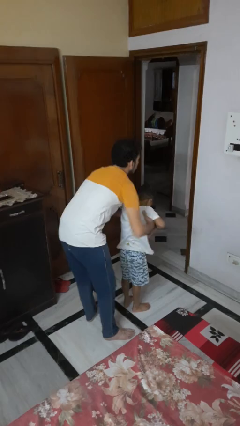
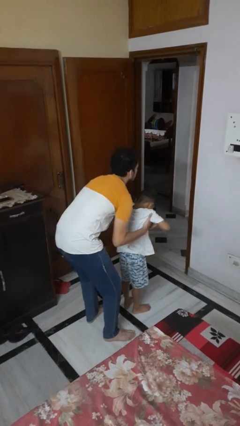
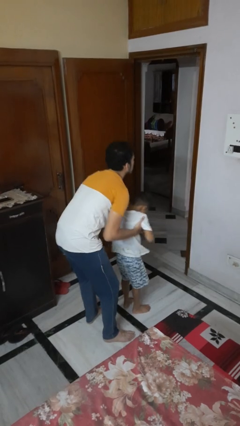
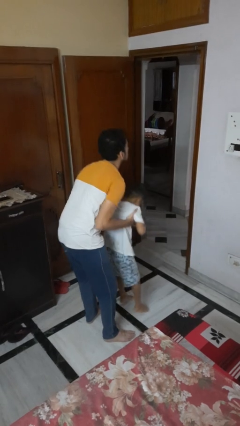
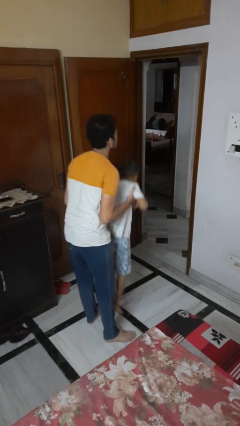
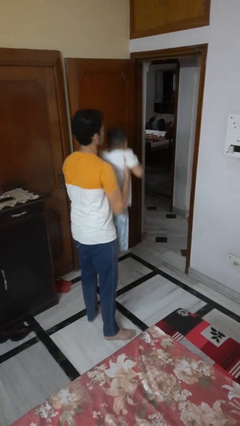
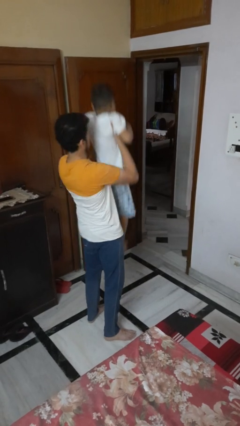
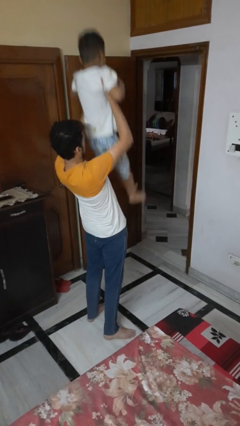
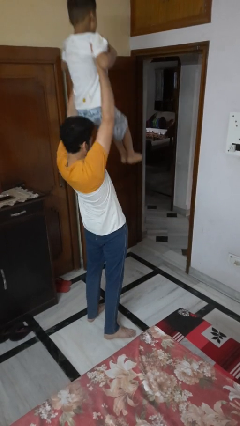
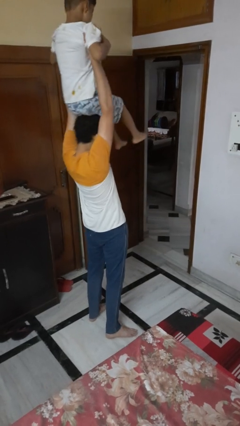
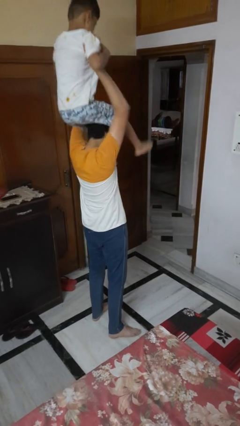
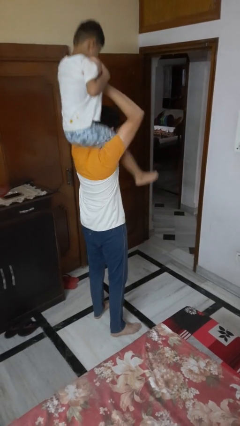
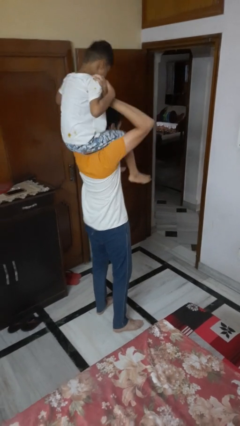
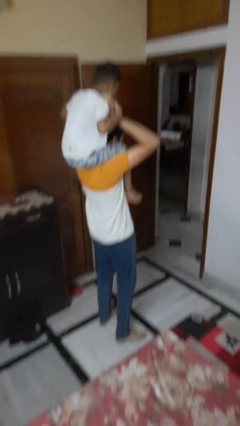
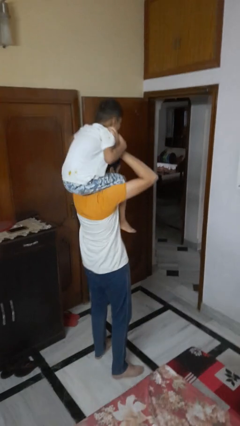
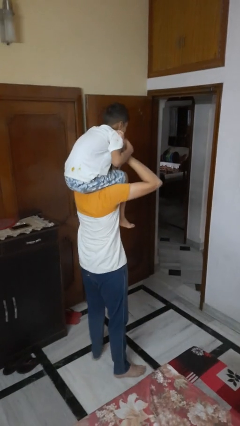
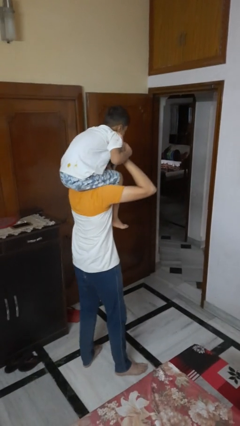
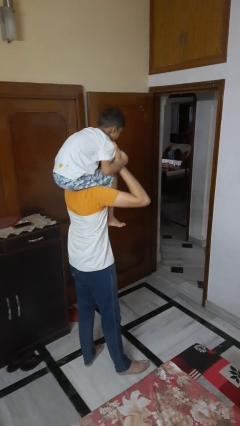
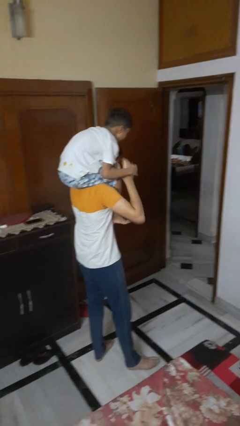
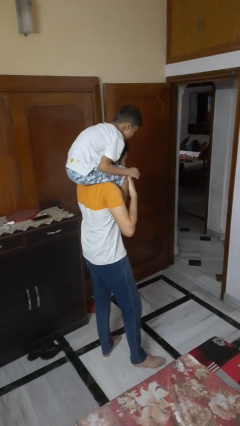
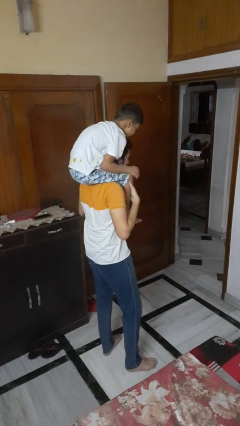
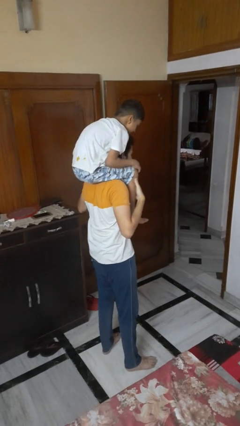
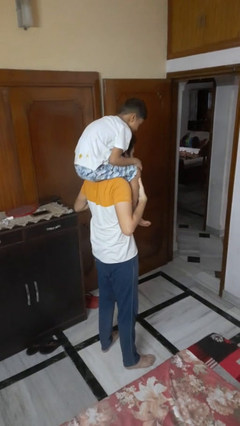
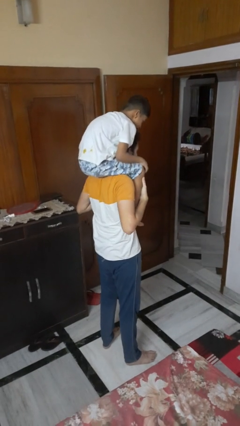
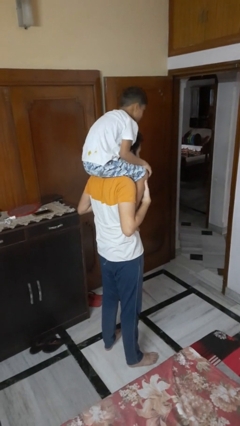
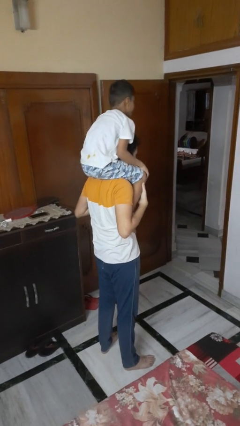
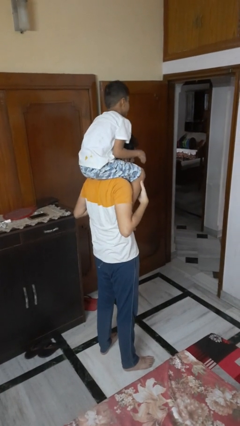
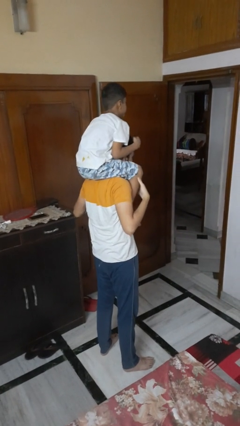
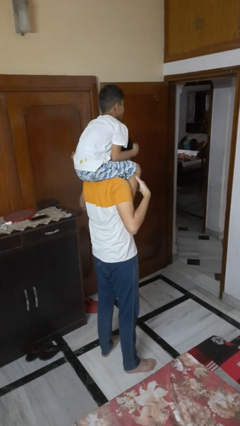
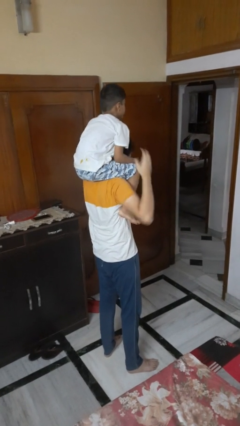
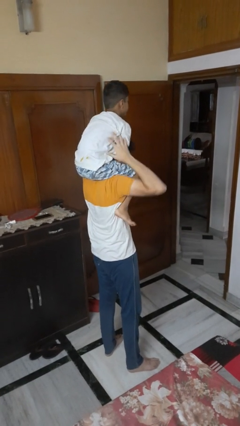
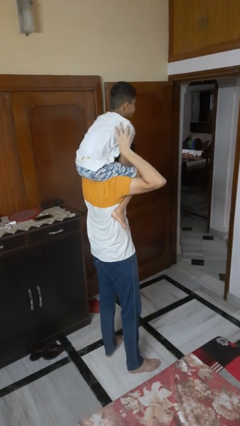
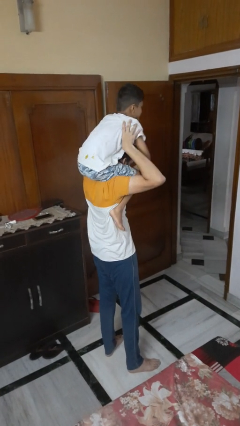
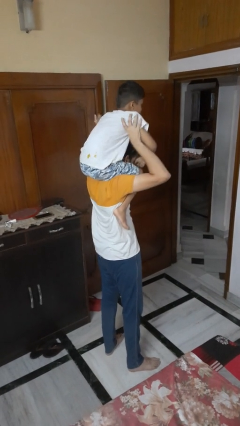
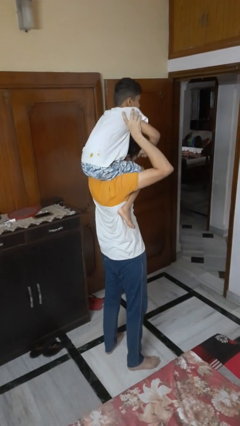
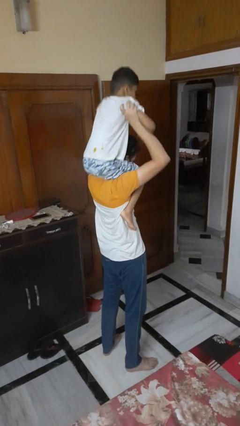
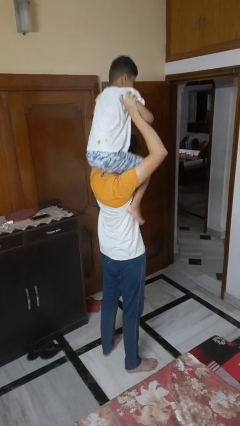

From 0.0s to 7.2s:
person carries person over shoulder

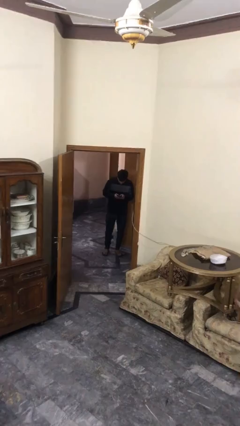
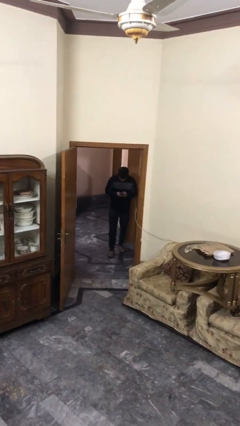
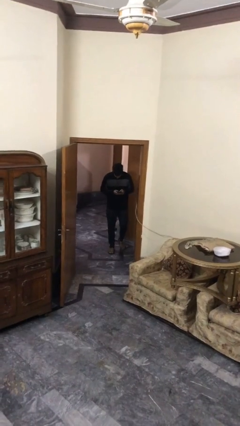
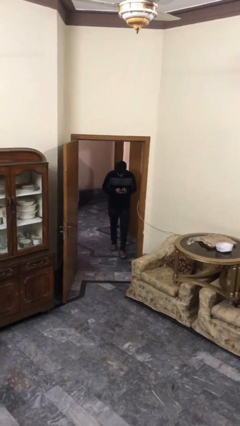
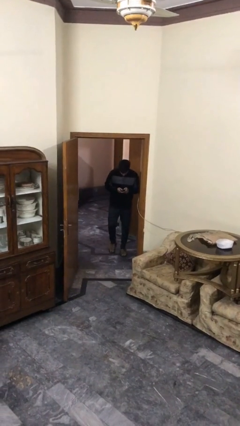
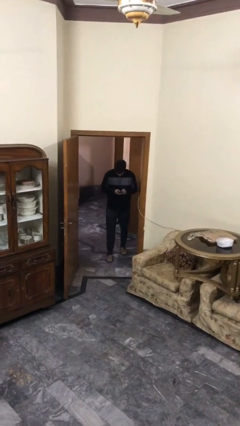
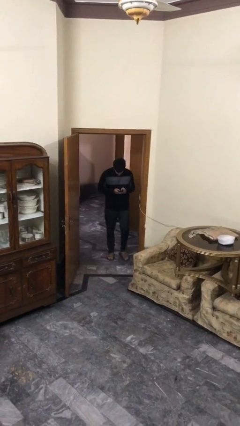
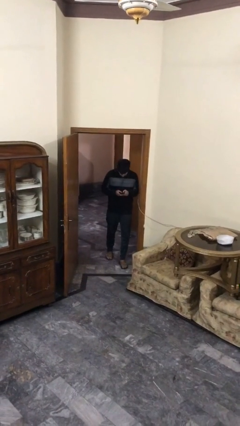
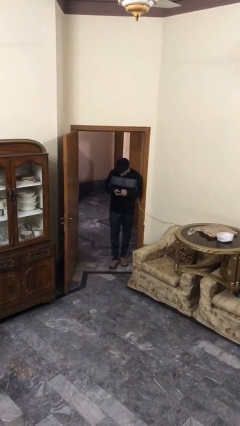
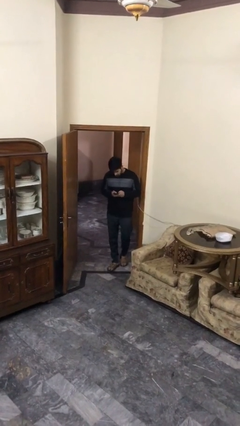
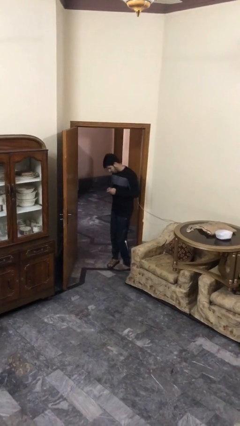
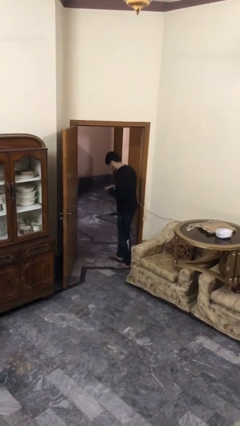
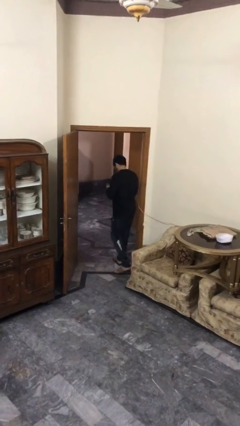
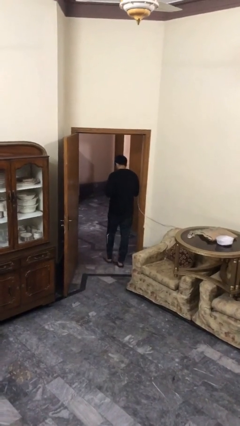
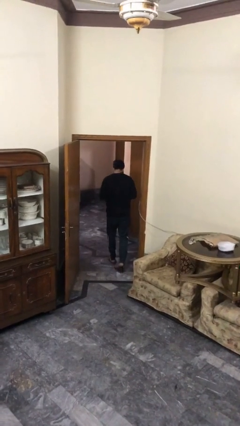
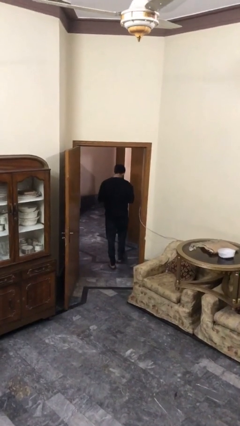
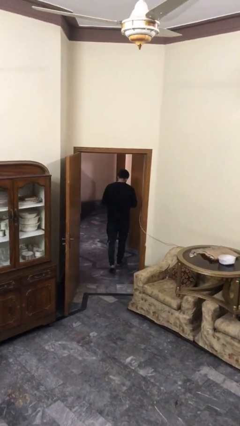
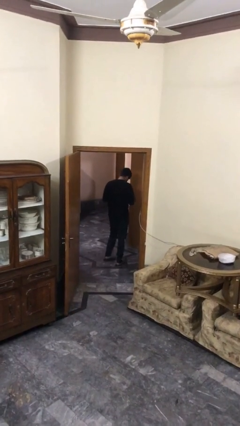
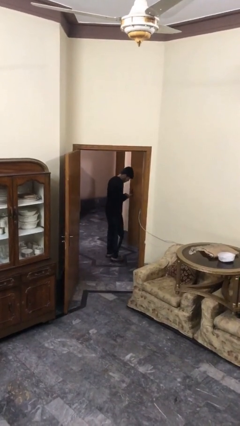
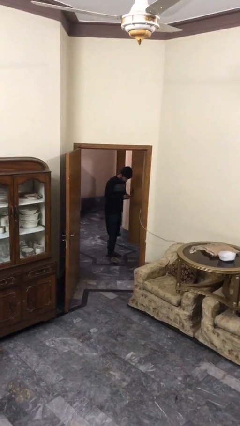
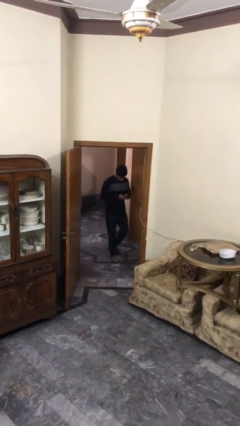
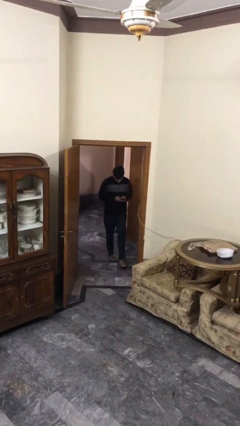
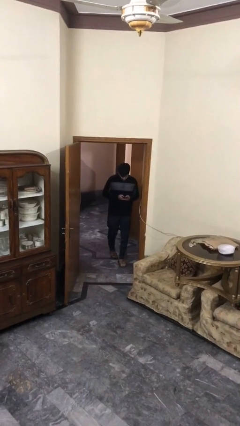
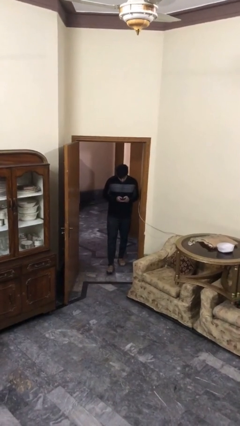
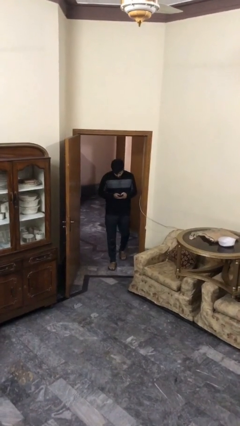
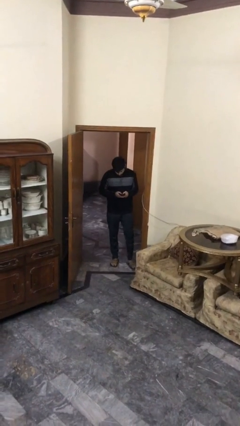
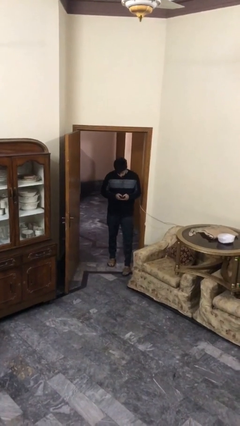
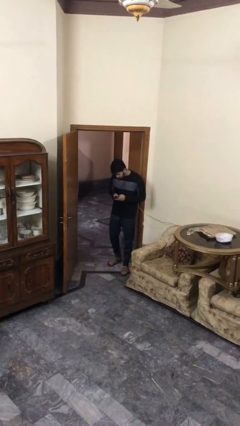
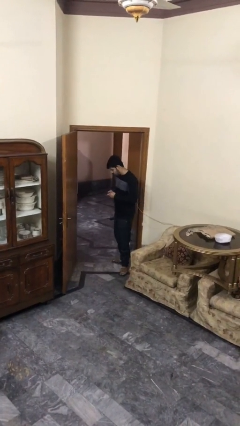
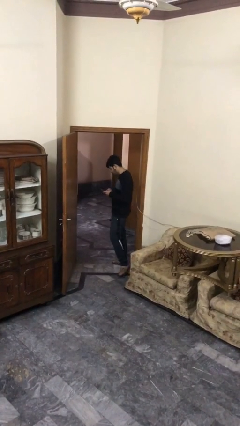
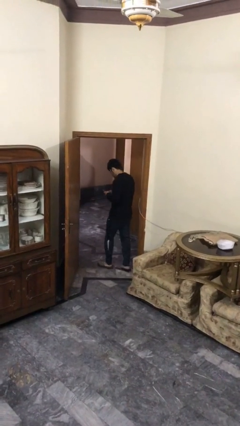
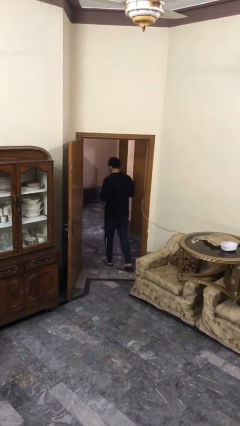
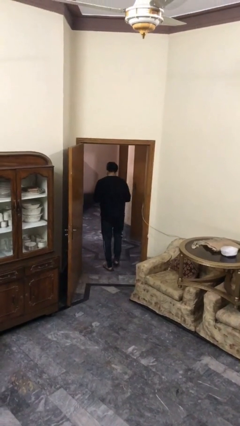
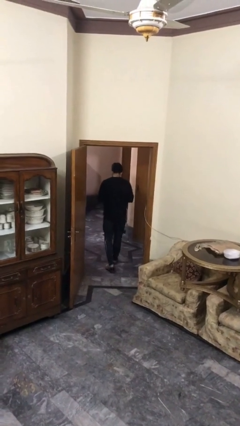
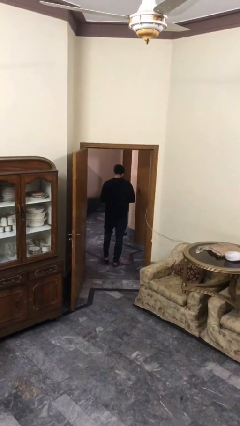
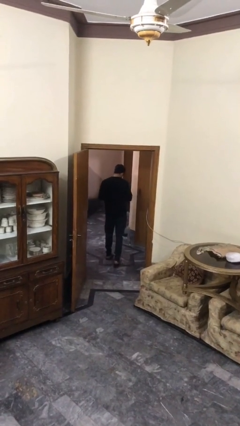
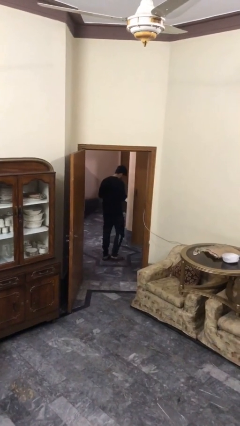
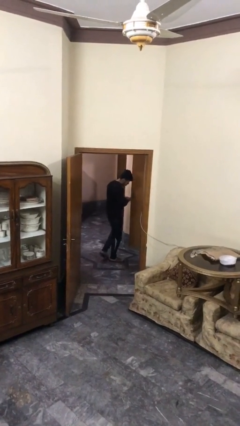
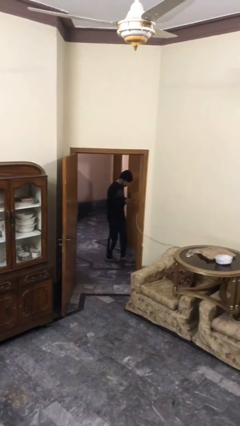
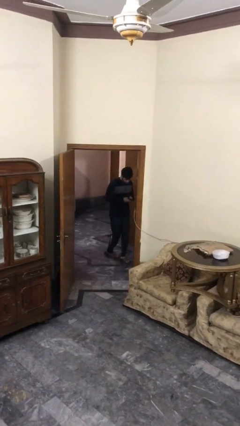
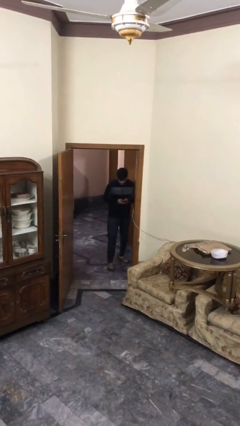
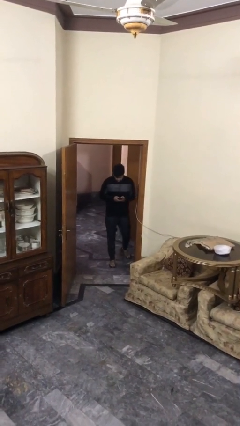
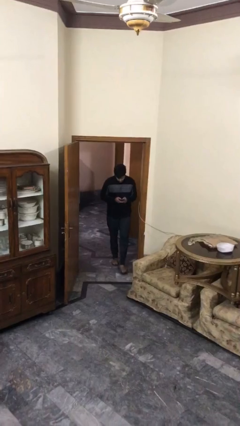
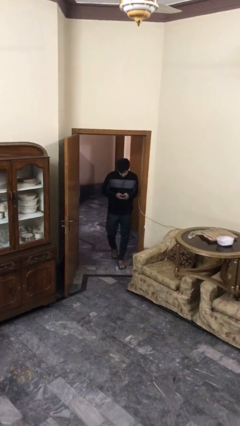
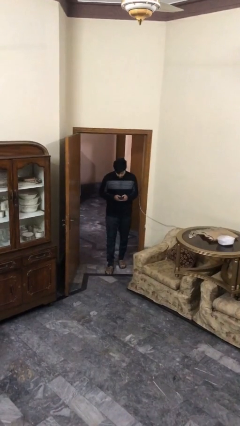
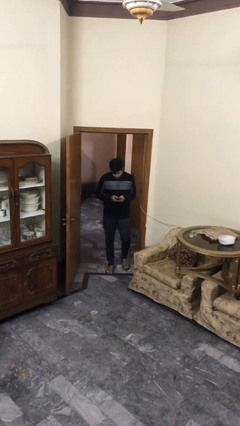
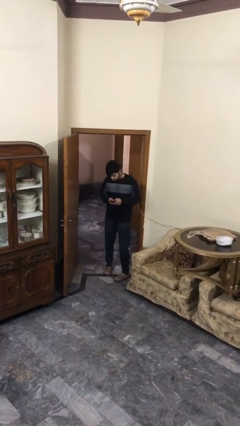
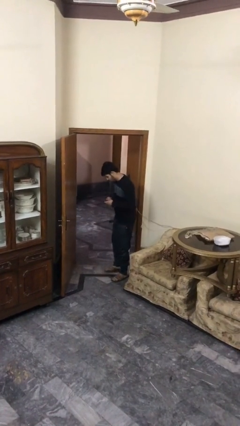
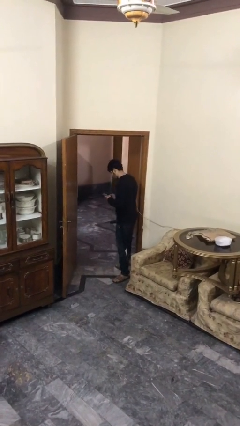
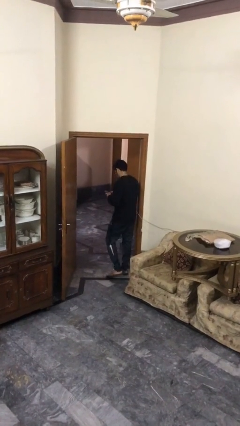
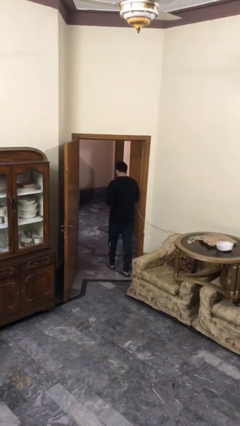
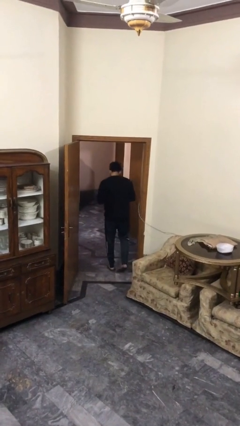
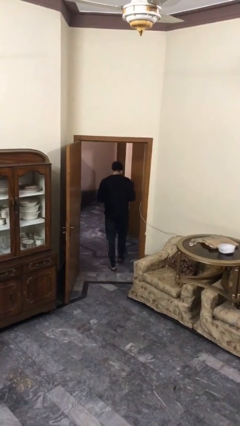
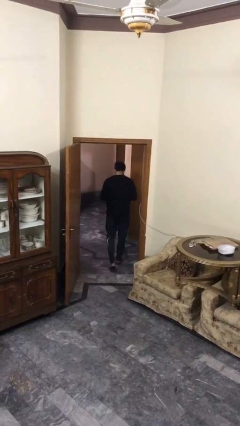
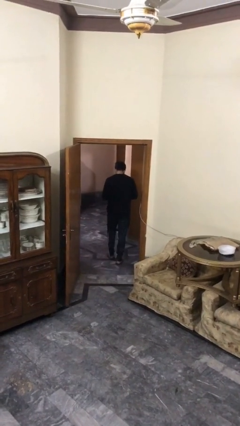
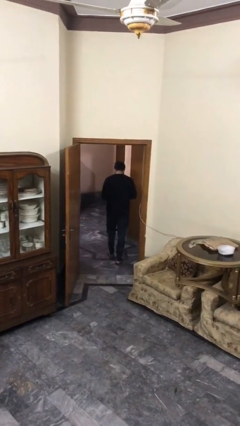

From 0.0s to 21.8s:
person texts on phone

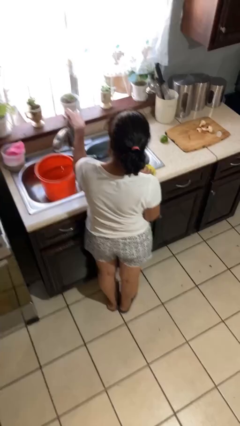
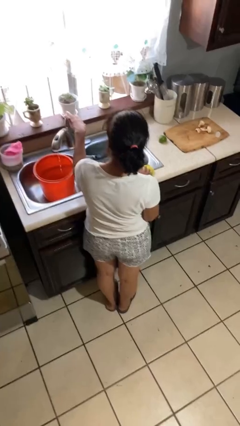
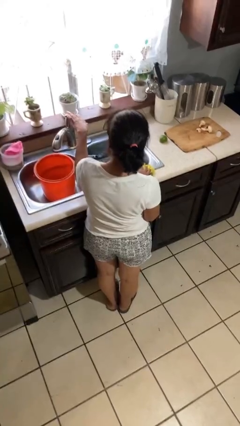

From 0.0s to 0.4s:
person turns off faucet
